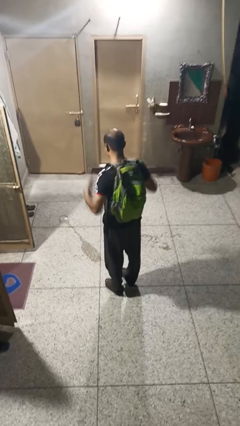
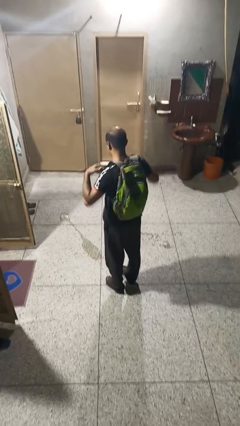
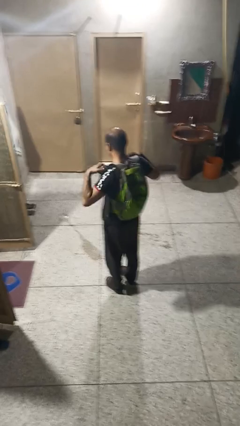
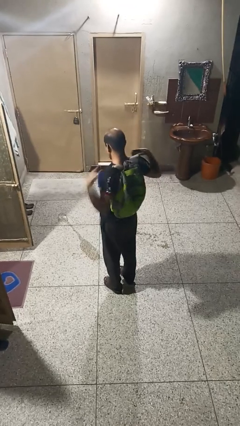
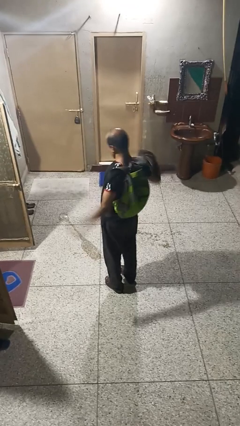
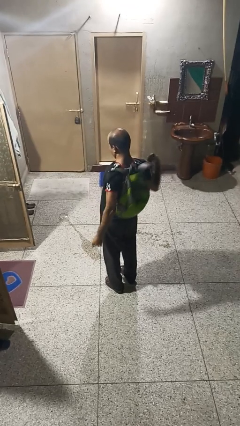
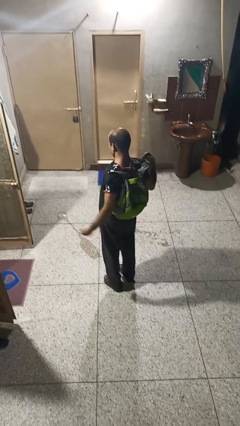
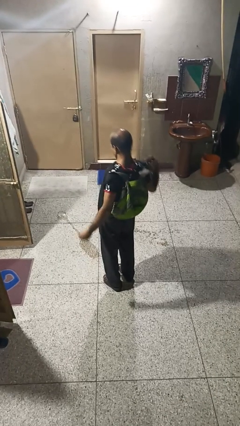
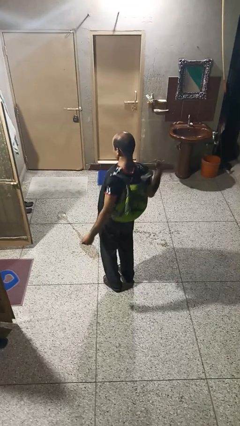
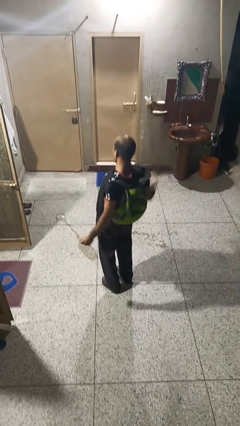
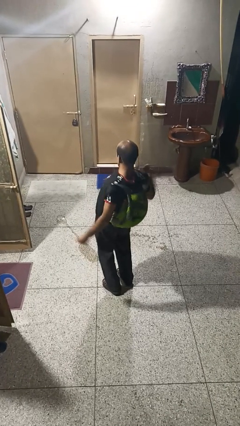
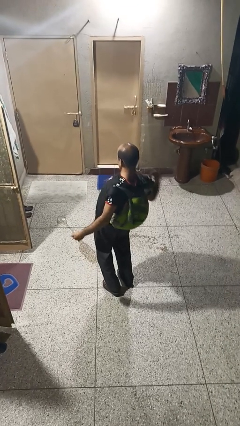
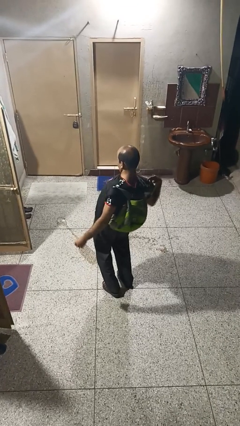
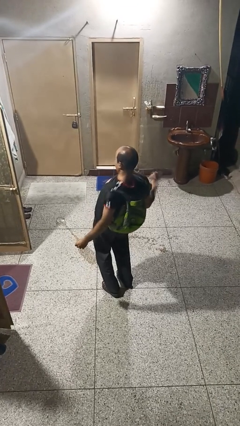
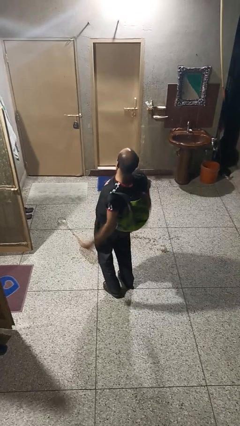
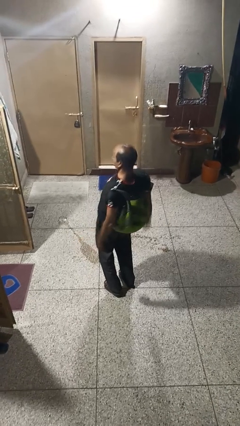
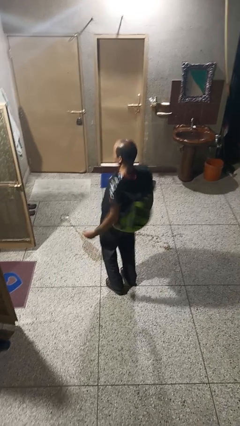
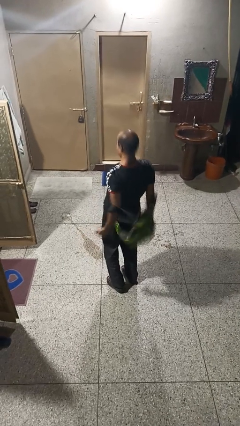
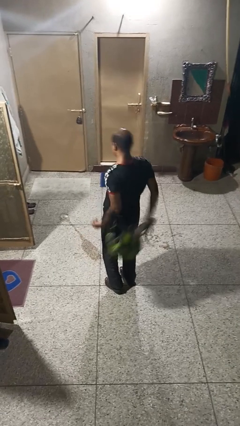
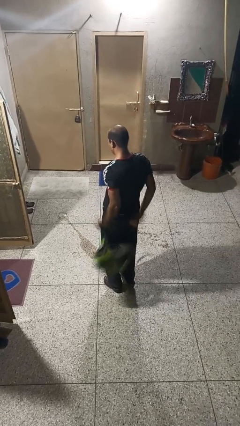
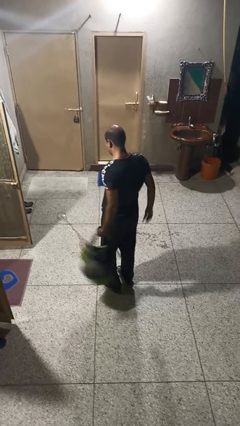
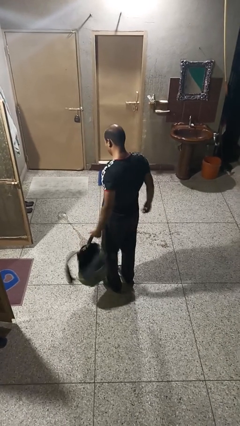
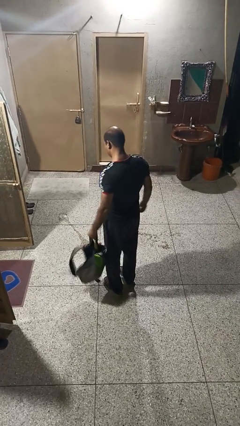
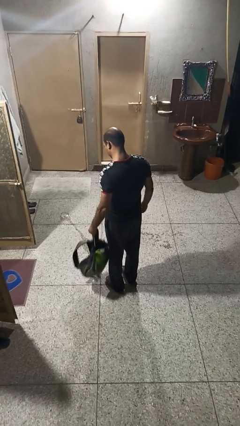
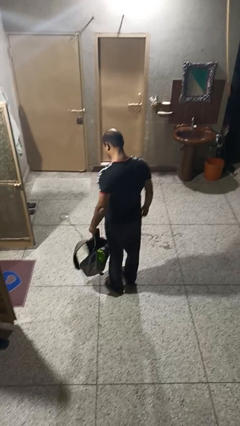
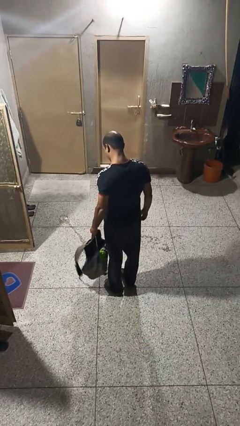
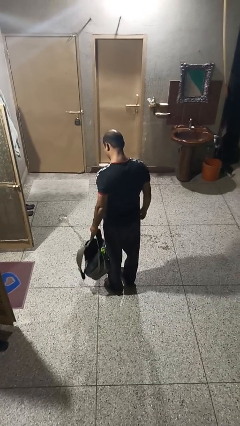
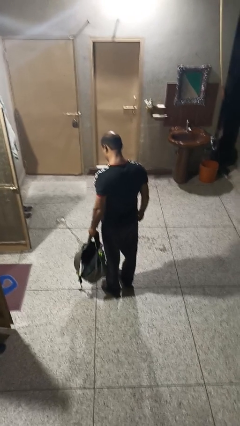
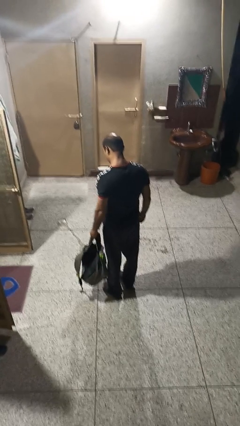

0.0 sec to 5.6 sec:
person takes off backpack

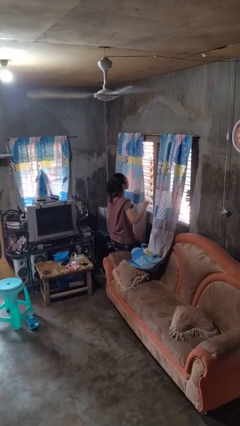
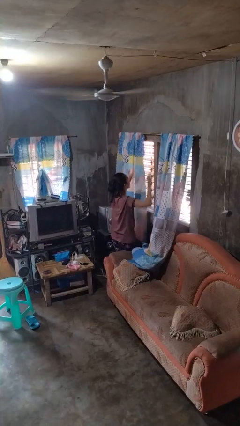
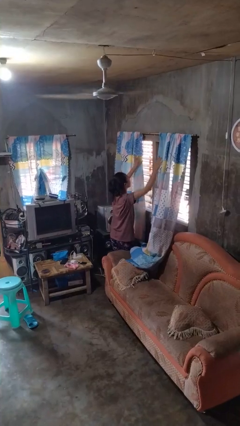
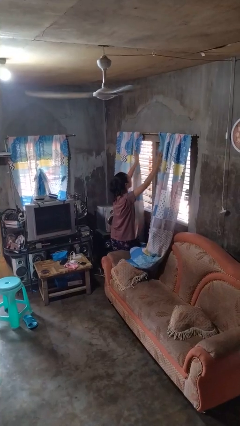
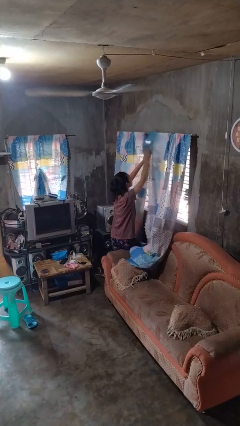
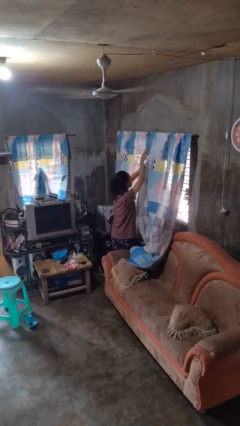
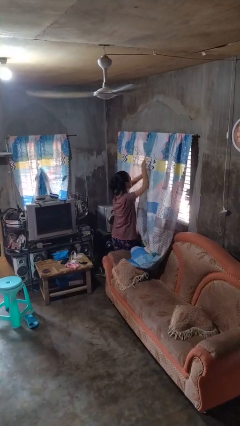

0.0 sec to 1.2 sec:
person closes curtains

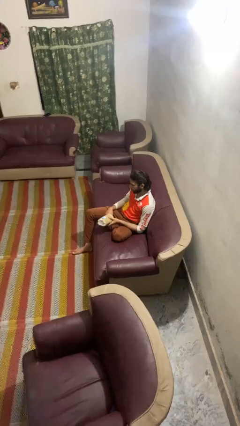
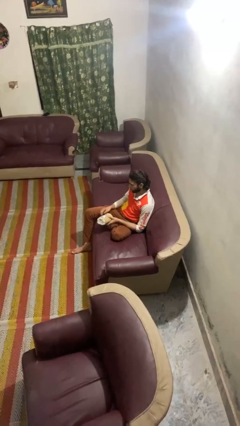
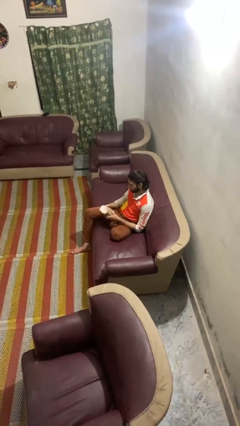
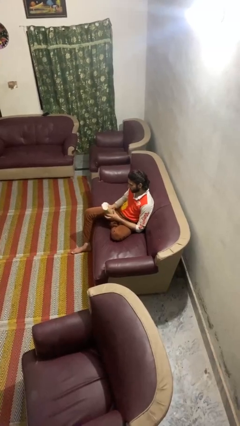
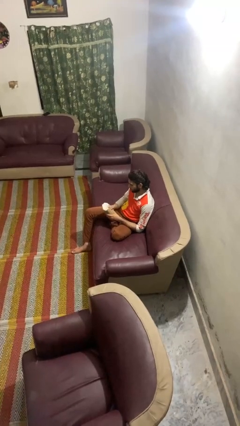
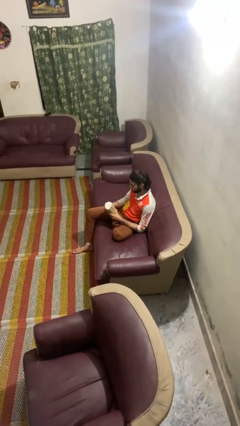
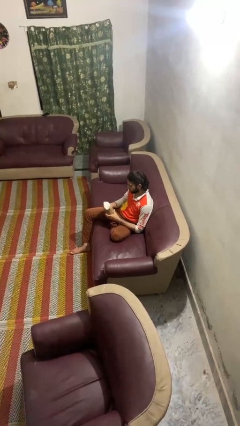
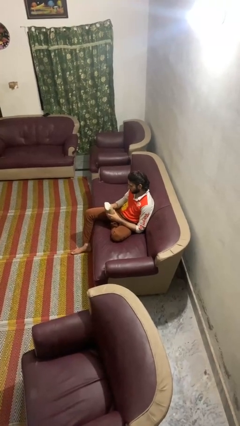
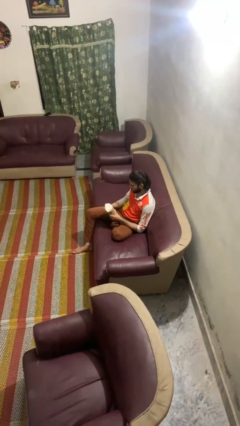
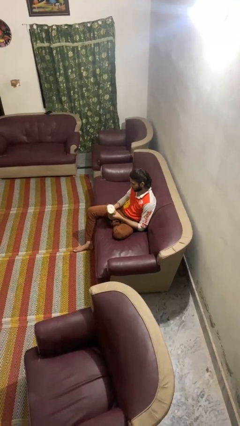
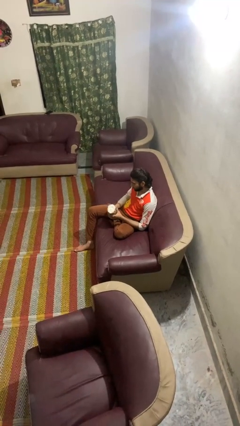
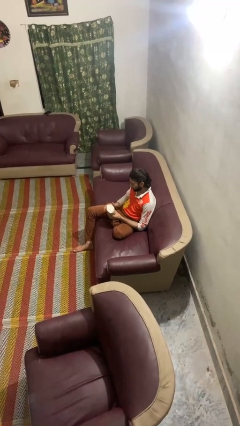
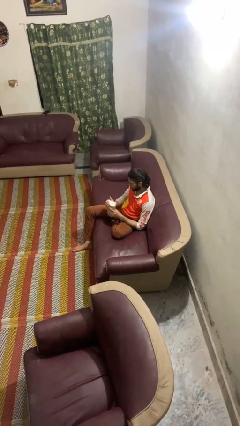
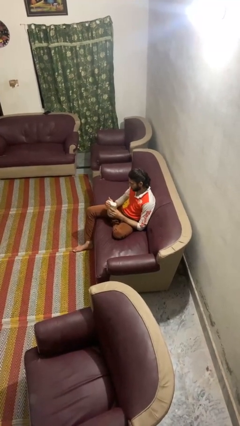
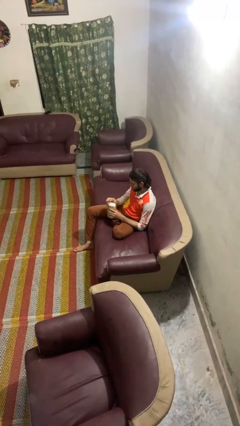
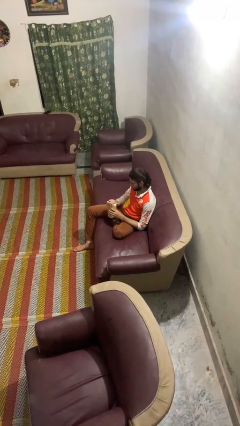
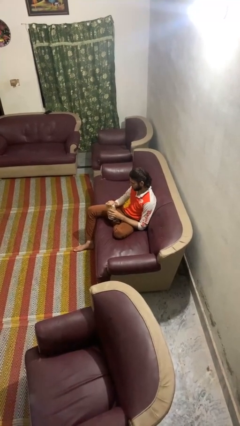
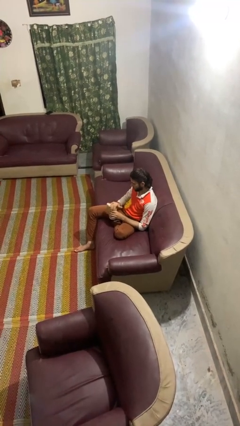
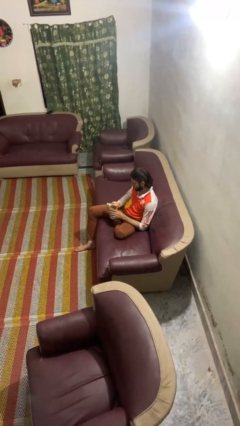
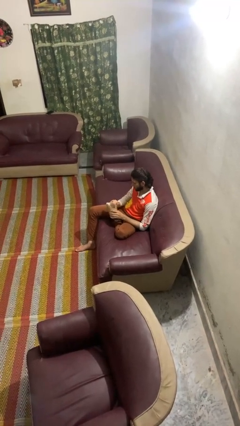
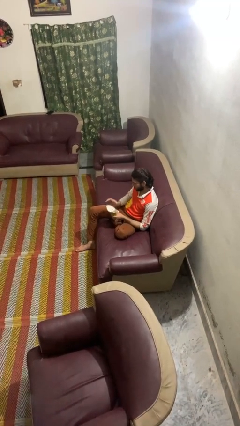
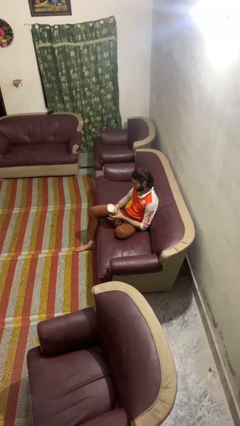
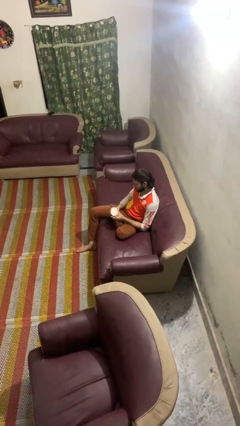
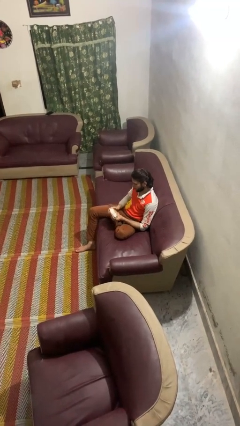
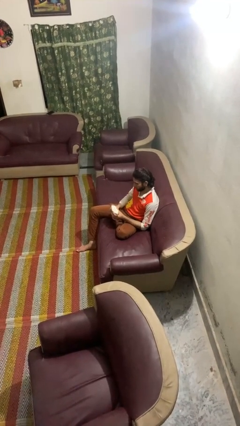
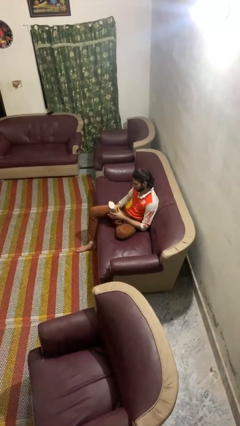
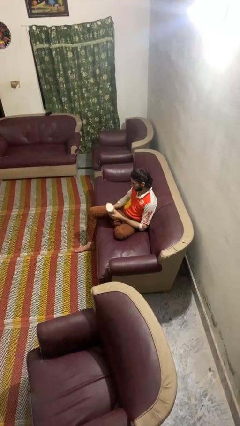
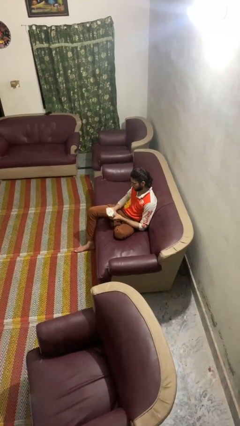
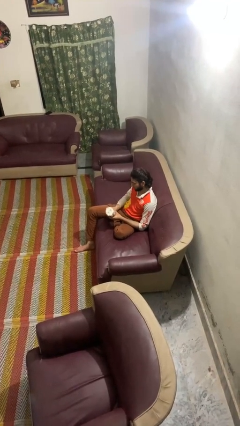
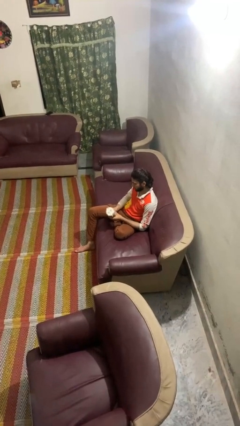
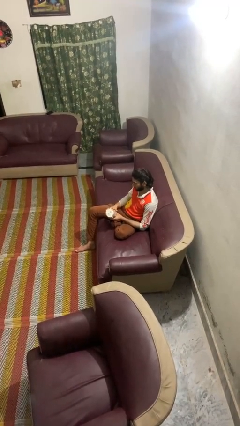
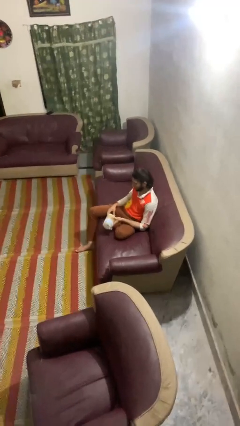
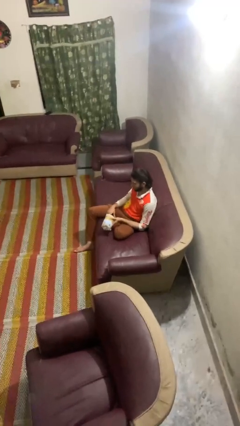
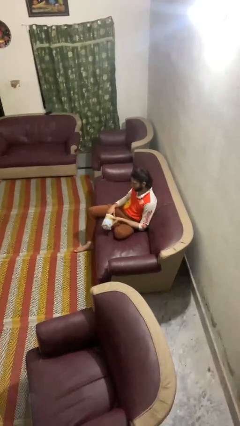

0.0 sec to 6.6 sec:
person squeezes object

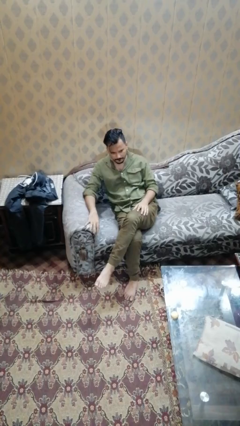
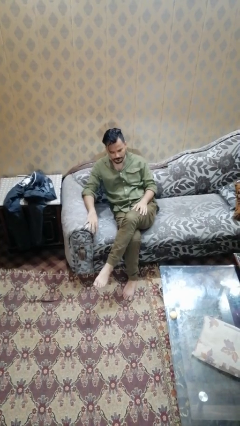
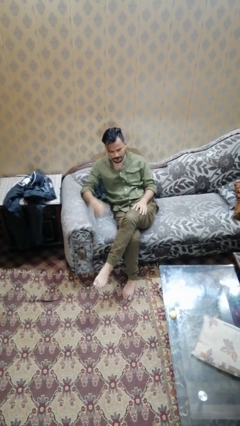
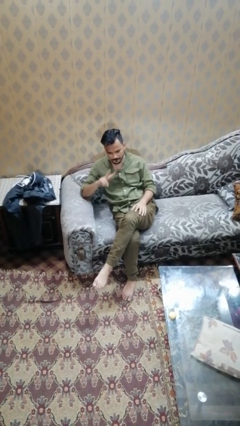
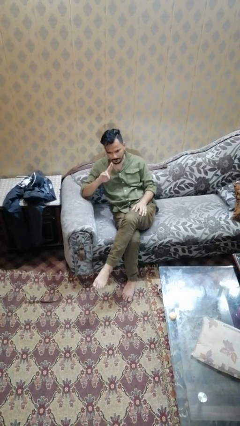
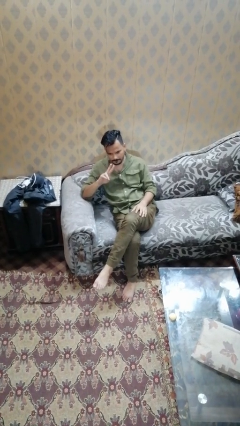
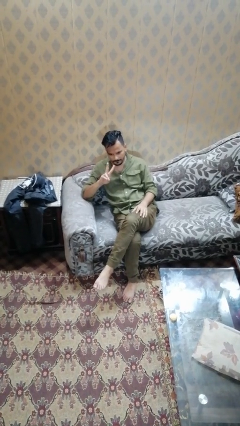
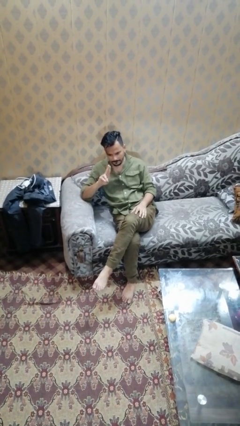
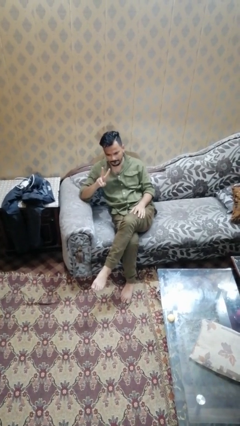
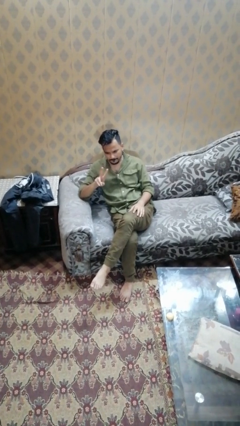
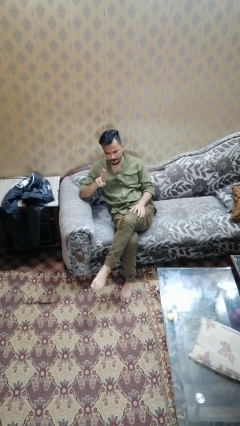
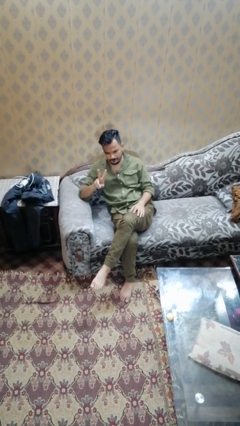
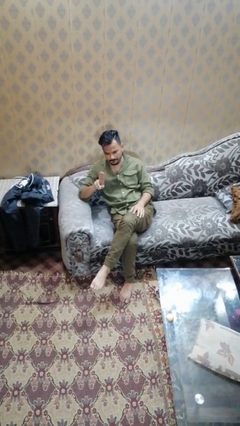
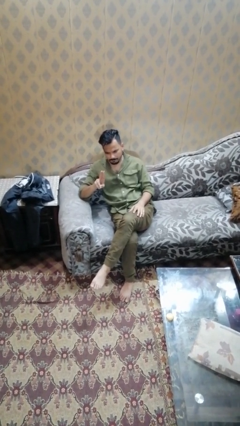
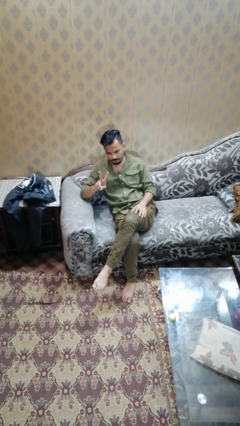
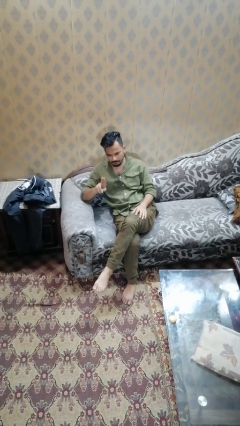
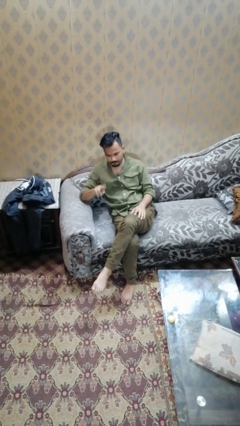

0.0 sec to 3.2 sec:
person gestures cut

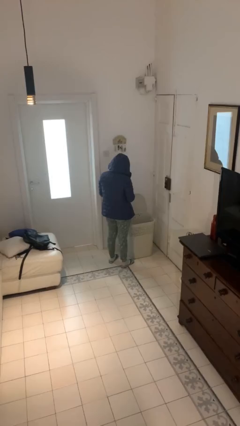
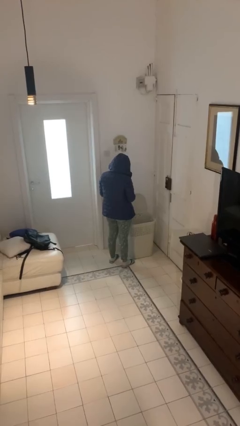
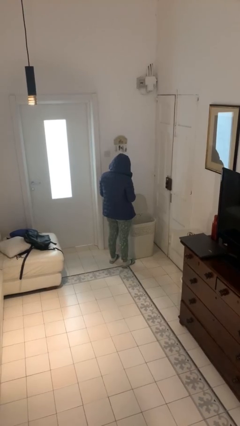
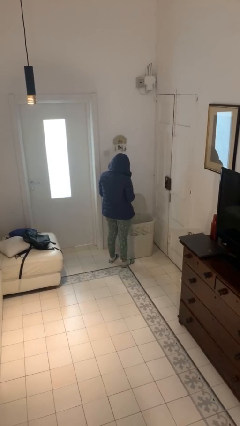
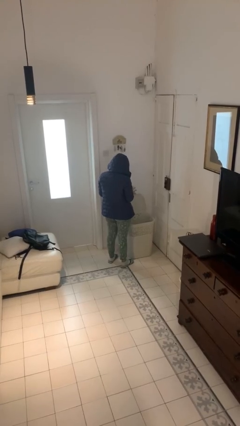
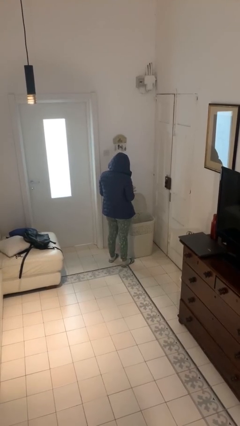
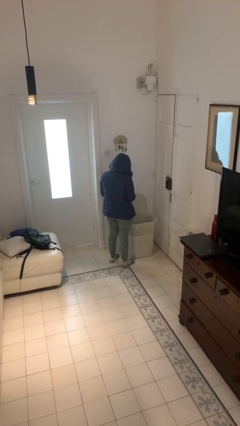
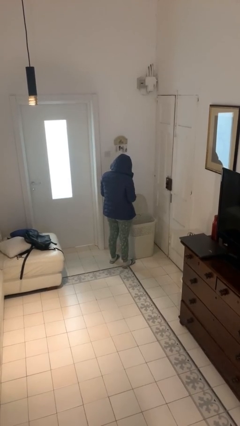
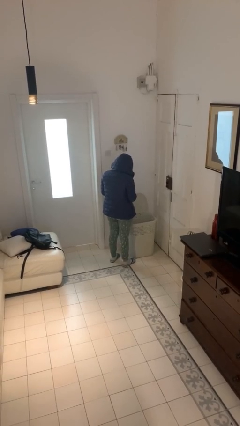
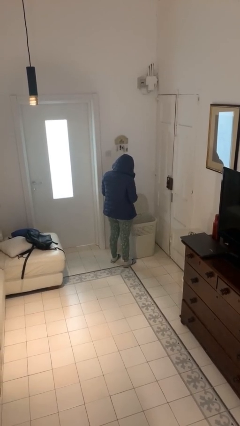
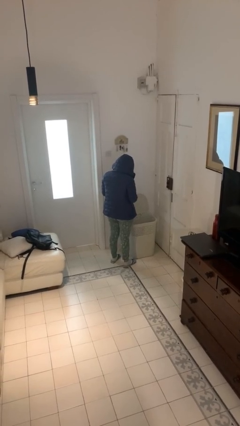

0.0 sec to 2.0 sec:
person discards trash
